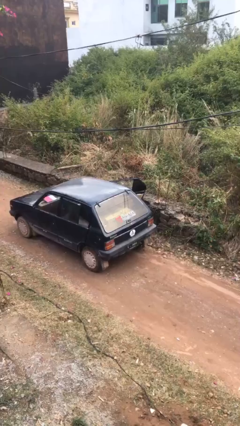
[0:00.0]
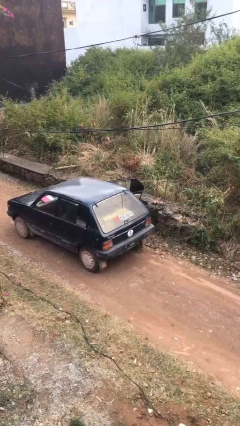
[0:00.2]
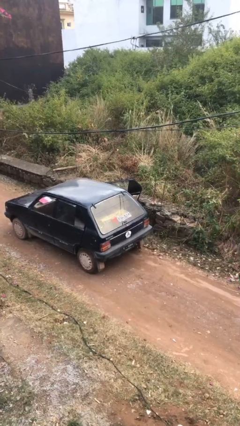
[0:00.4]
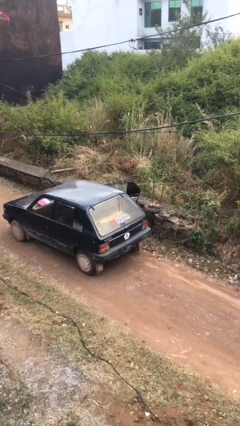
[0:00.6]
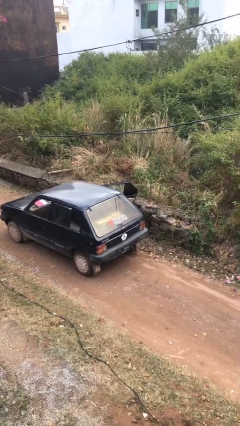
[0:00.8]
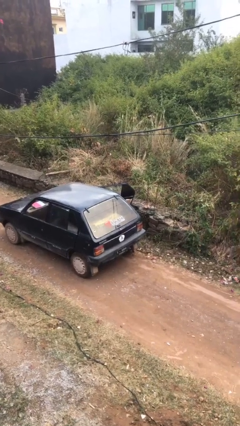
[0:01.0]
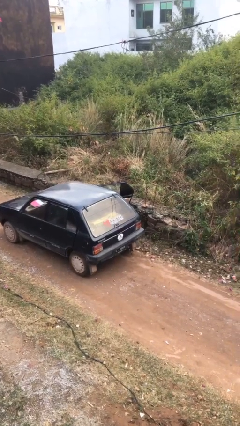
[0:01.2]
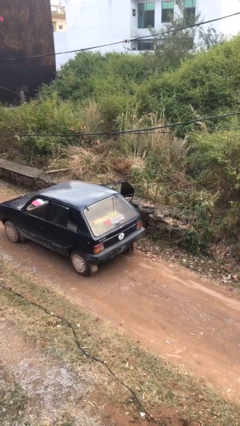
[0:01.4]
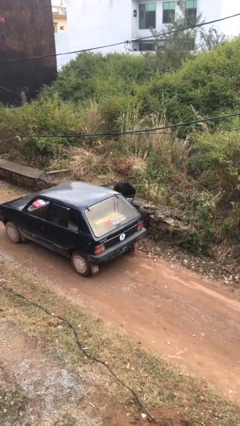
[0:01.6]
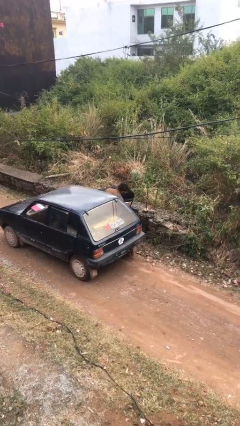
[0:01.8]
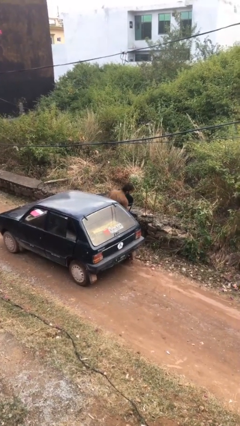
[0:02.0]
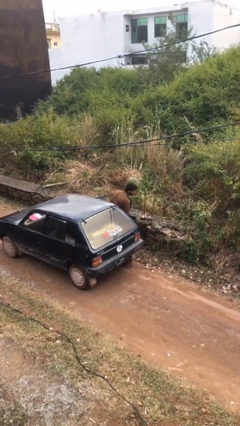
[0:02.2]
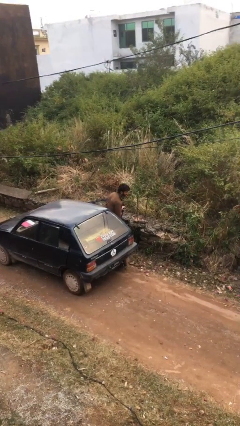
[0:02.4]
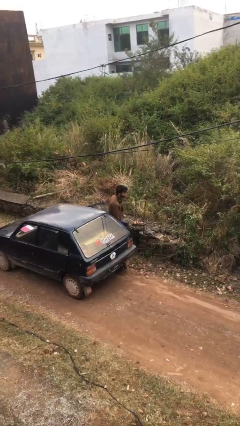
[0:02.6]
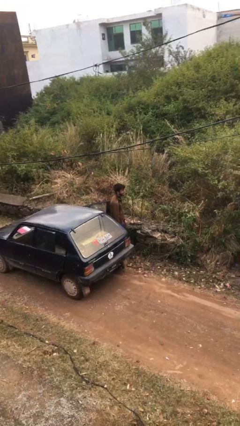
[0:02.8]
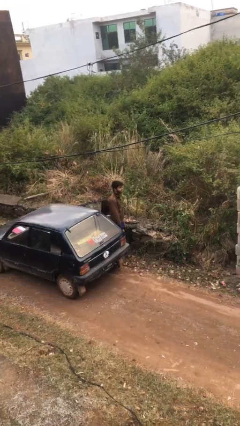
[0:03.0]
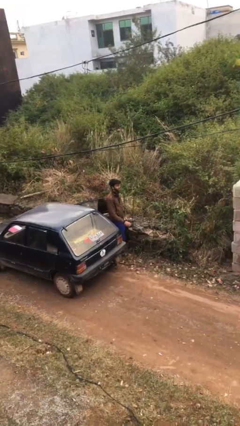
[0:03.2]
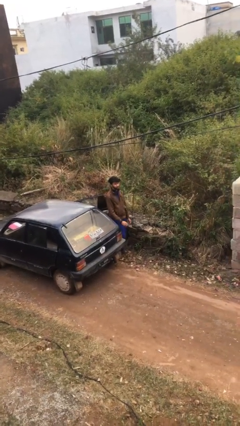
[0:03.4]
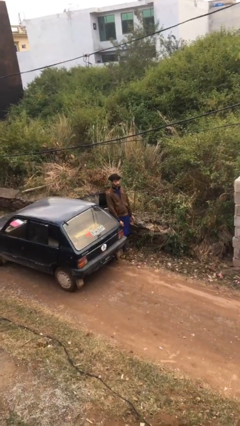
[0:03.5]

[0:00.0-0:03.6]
person exits car

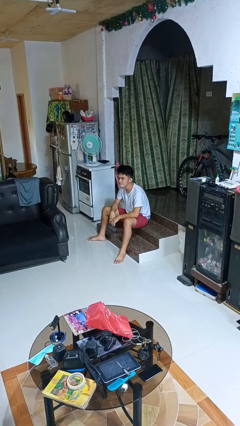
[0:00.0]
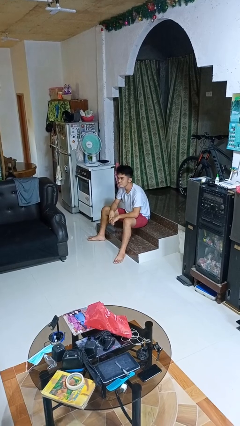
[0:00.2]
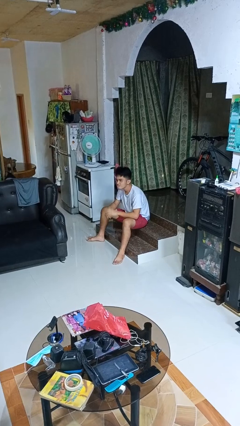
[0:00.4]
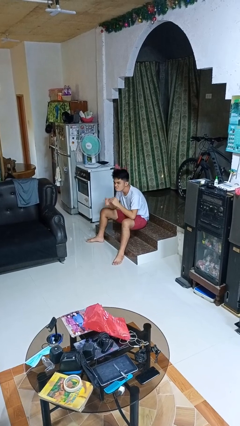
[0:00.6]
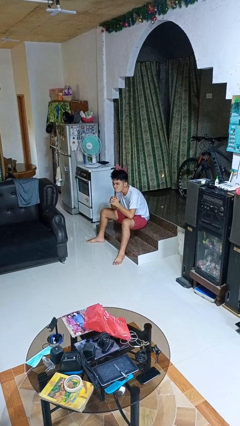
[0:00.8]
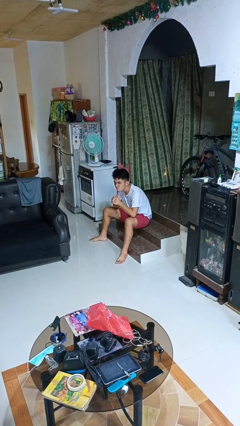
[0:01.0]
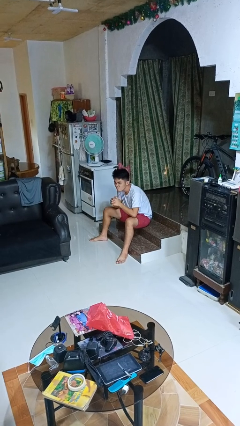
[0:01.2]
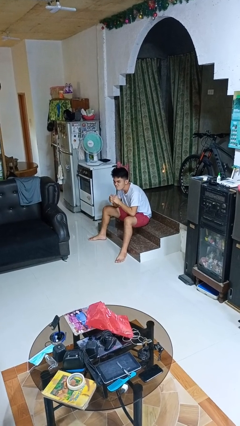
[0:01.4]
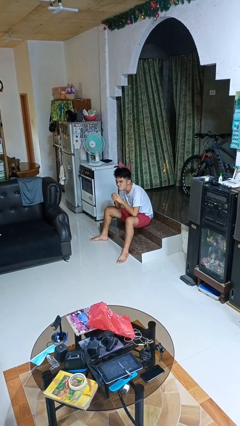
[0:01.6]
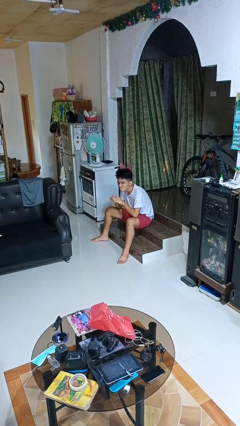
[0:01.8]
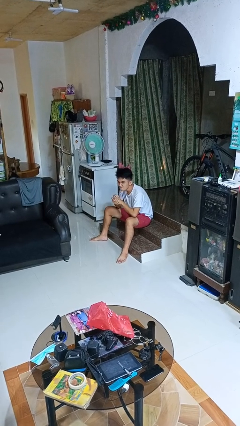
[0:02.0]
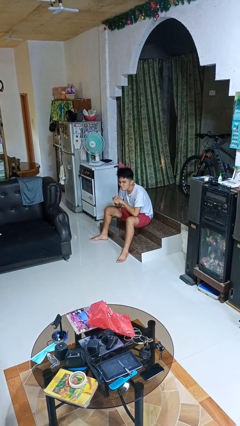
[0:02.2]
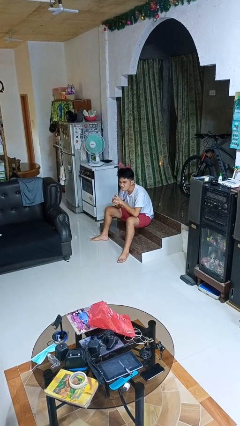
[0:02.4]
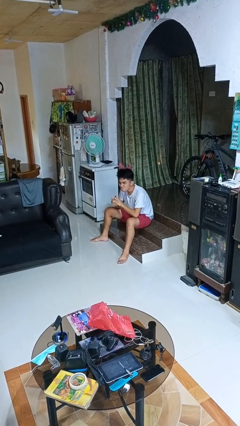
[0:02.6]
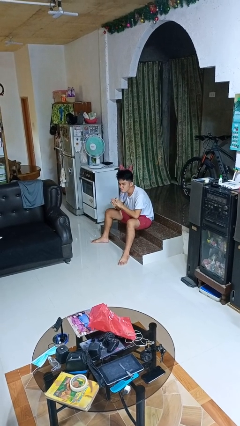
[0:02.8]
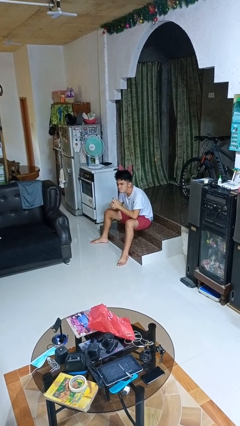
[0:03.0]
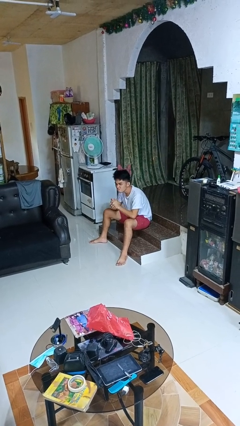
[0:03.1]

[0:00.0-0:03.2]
person cracks knuckles

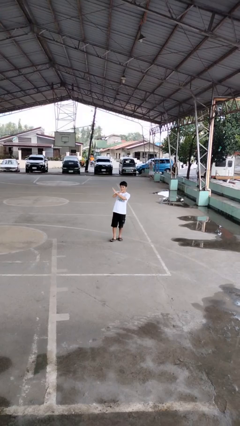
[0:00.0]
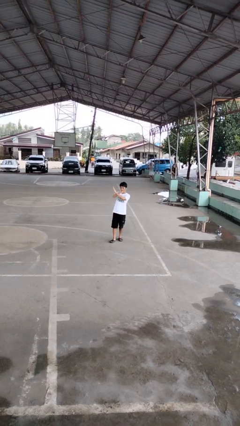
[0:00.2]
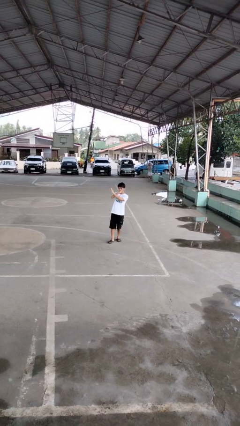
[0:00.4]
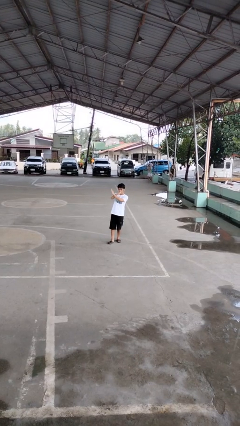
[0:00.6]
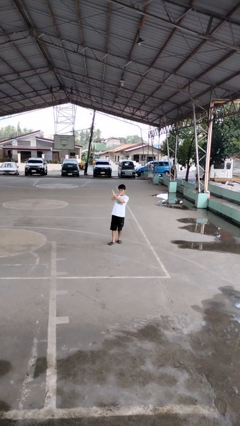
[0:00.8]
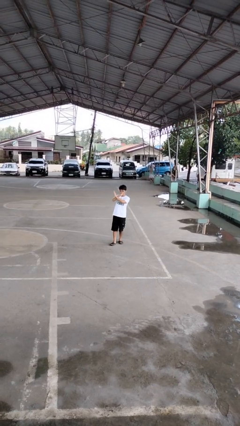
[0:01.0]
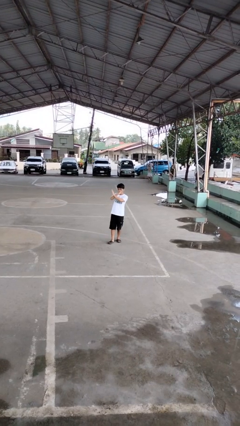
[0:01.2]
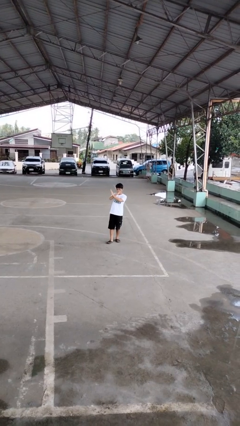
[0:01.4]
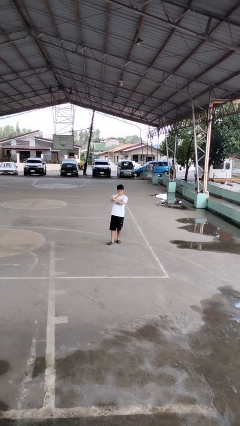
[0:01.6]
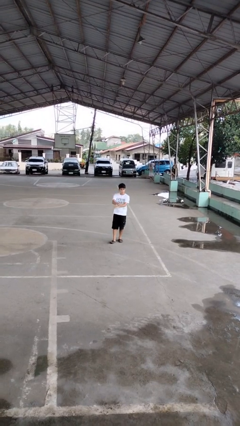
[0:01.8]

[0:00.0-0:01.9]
person gestures arms x

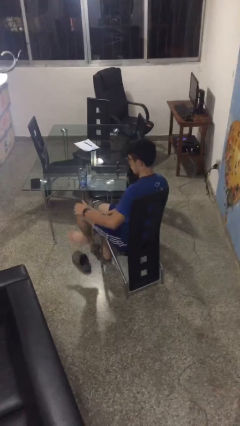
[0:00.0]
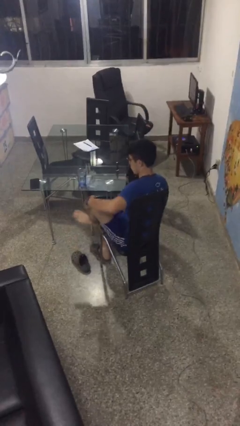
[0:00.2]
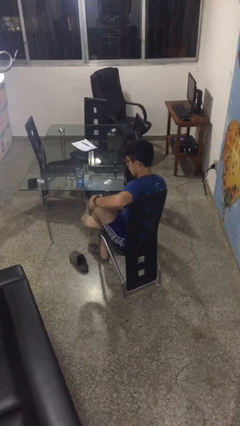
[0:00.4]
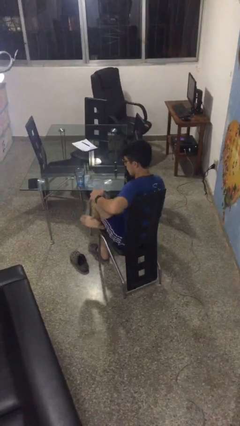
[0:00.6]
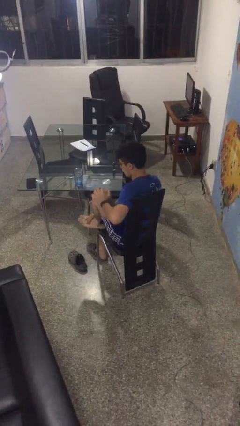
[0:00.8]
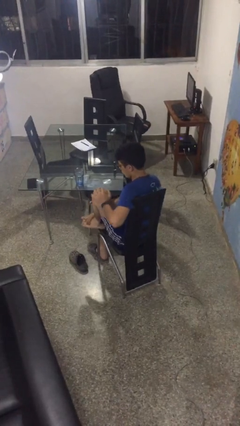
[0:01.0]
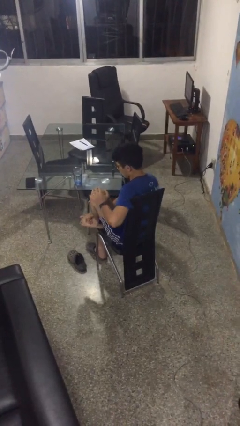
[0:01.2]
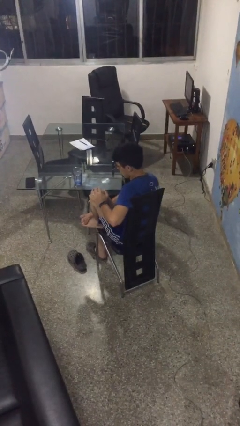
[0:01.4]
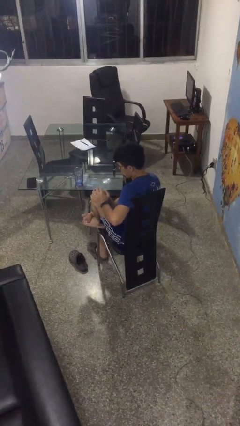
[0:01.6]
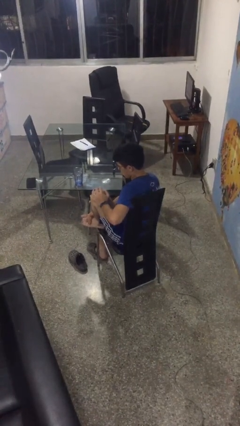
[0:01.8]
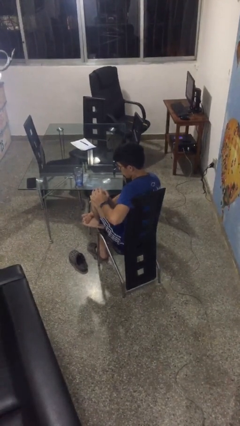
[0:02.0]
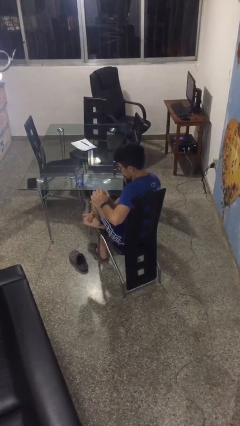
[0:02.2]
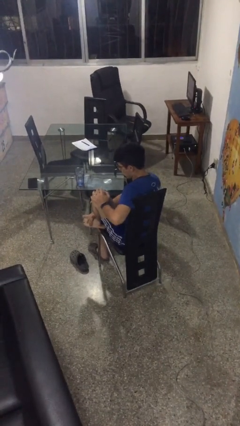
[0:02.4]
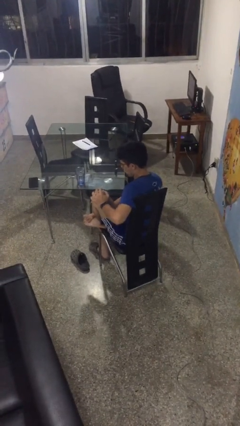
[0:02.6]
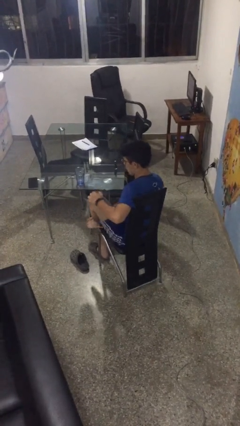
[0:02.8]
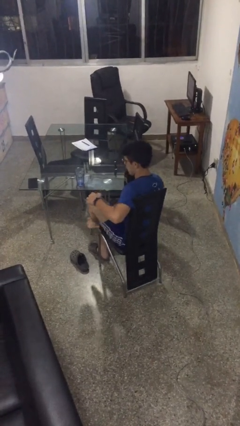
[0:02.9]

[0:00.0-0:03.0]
person rubs foot

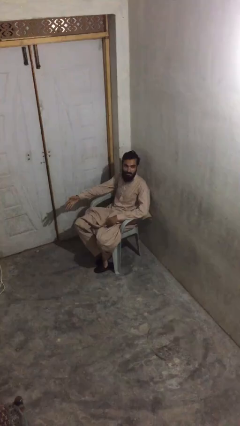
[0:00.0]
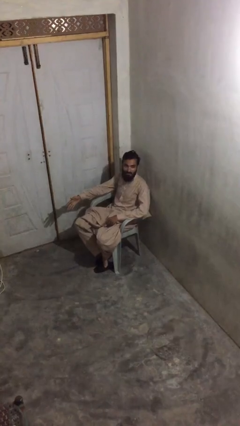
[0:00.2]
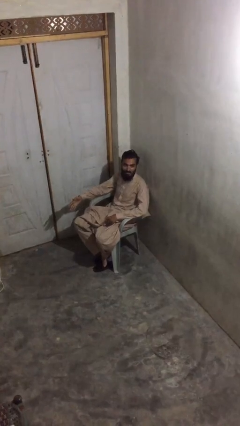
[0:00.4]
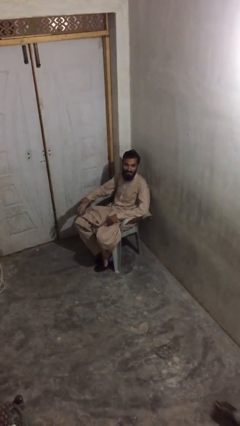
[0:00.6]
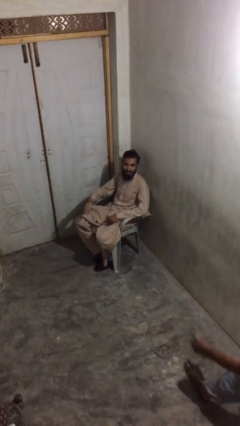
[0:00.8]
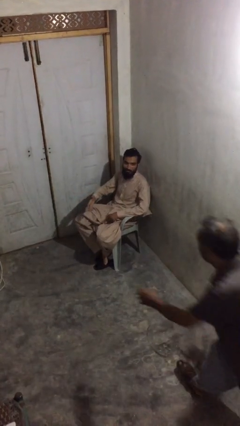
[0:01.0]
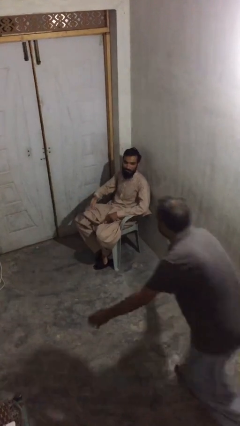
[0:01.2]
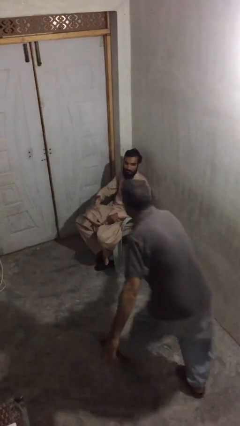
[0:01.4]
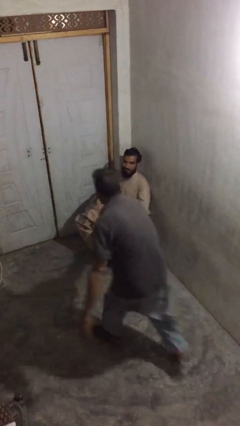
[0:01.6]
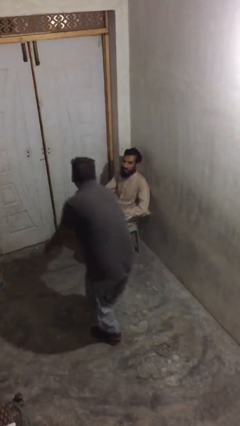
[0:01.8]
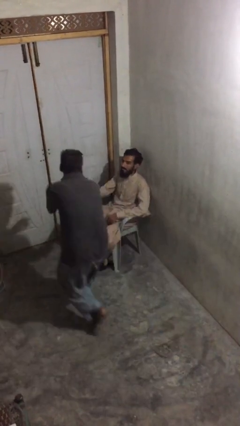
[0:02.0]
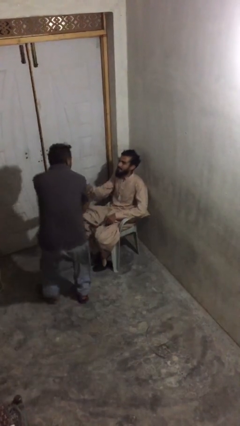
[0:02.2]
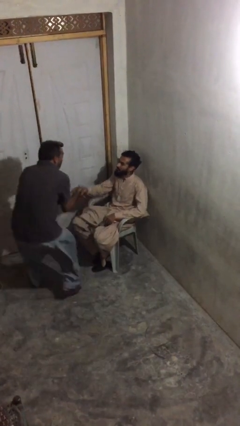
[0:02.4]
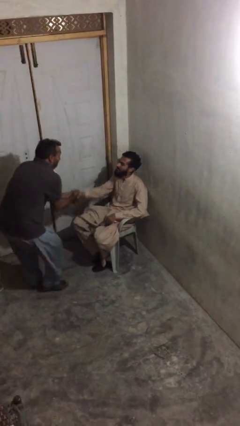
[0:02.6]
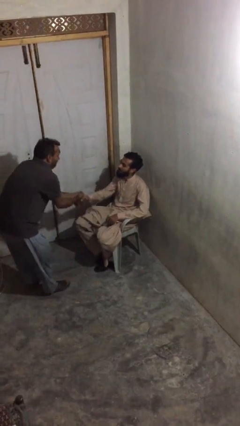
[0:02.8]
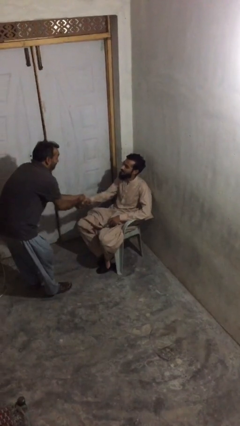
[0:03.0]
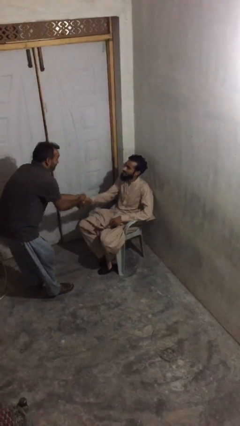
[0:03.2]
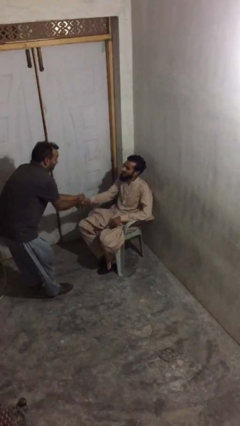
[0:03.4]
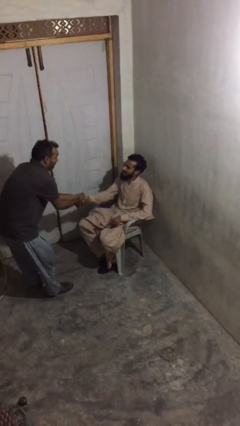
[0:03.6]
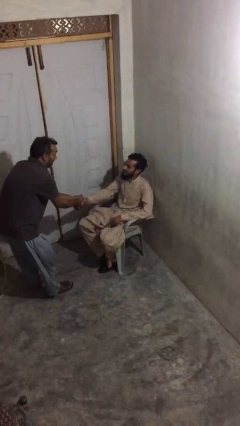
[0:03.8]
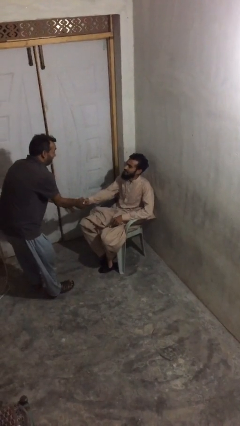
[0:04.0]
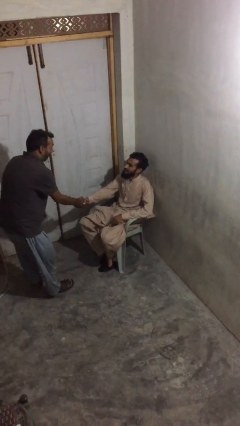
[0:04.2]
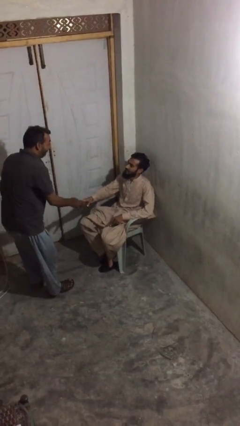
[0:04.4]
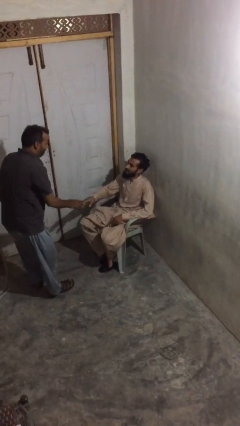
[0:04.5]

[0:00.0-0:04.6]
person shakes hand

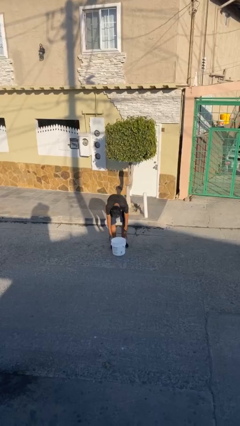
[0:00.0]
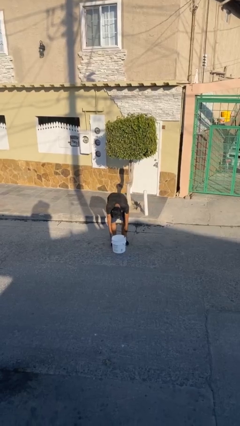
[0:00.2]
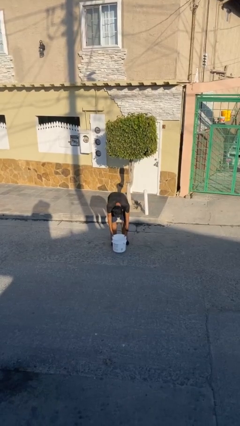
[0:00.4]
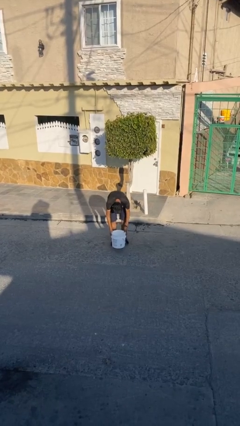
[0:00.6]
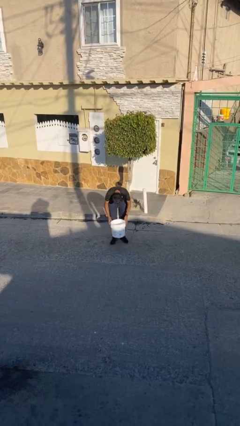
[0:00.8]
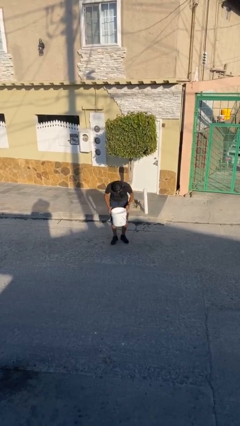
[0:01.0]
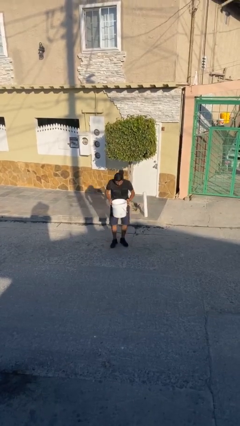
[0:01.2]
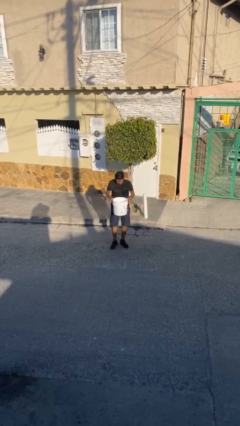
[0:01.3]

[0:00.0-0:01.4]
person picks up object from floor
